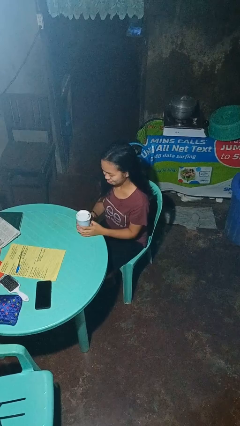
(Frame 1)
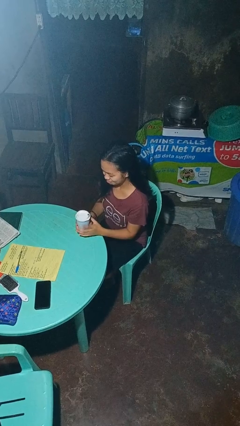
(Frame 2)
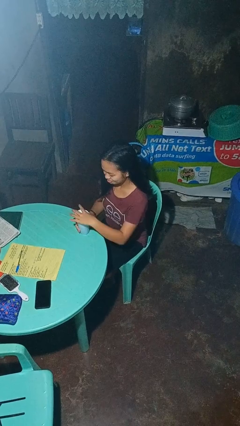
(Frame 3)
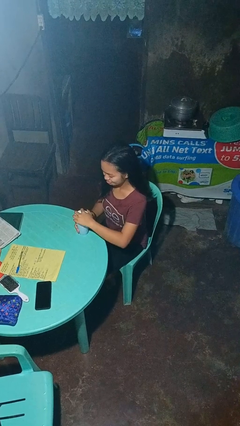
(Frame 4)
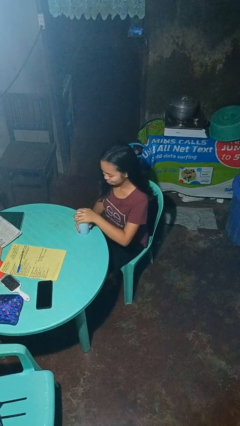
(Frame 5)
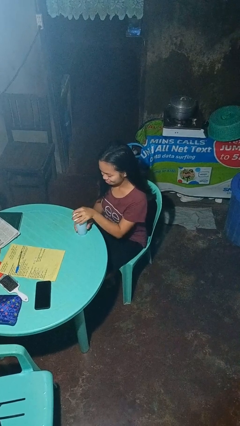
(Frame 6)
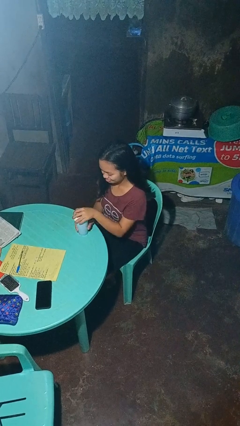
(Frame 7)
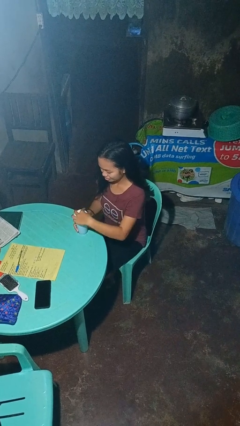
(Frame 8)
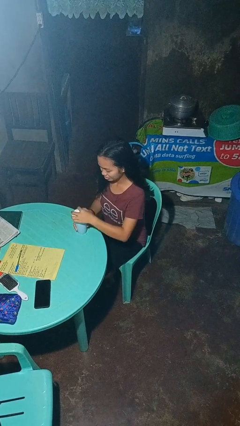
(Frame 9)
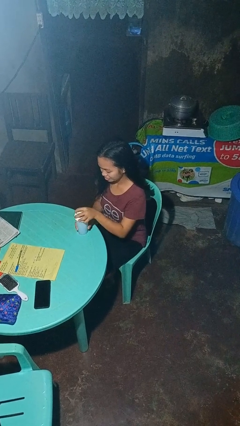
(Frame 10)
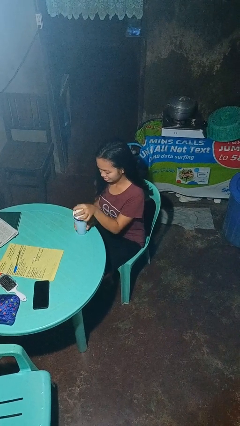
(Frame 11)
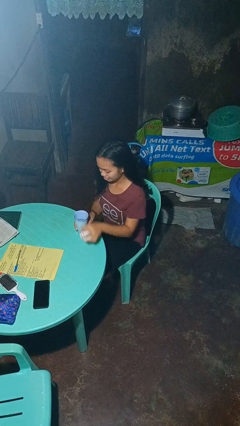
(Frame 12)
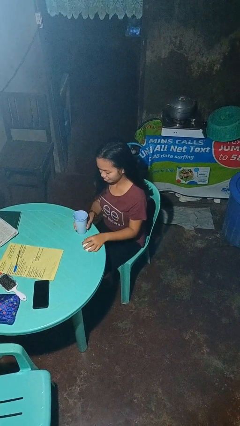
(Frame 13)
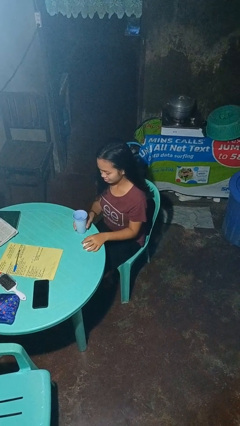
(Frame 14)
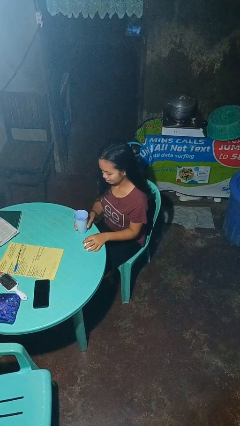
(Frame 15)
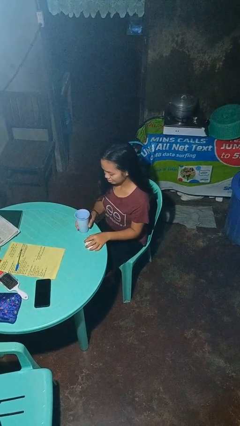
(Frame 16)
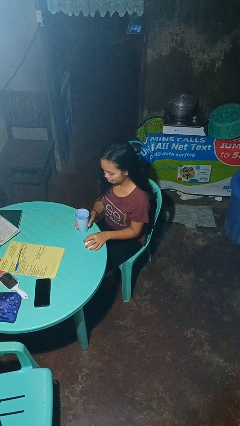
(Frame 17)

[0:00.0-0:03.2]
person unscrews lid from bottle

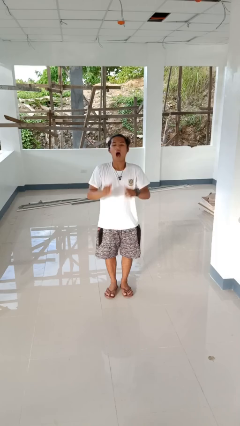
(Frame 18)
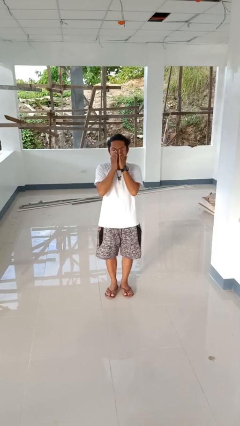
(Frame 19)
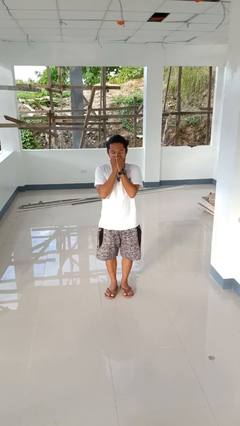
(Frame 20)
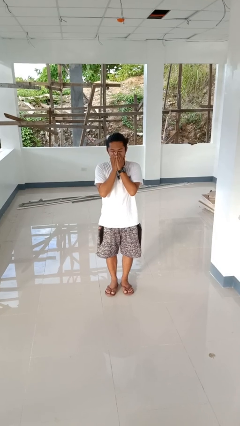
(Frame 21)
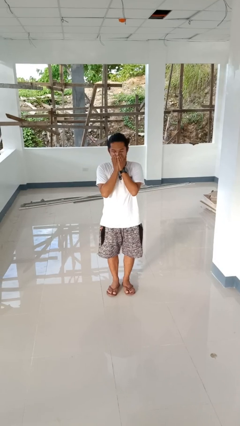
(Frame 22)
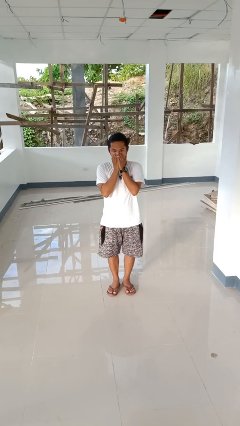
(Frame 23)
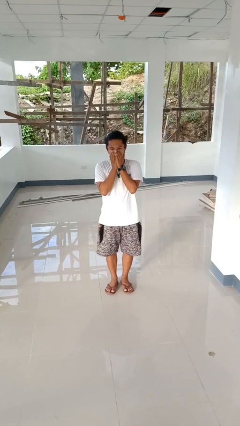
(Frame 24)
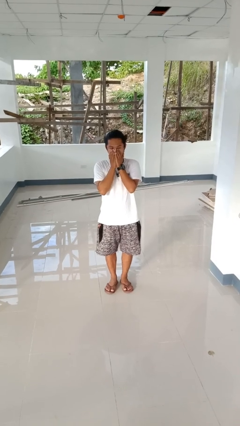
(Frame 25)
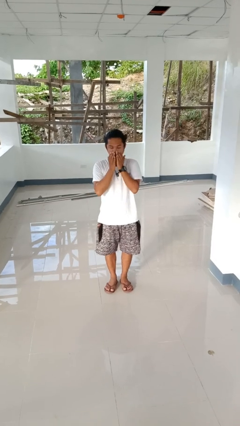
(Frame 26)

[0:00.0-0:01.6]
person sneezes into hand

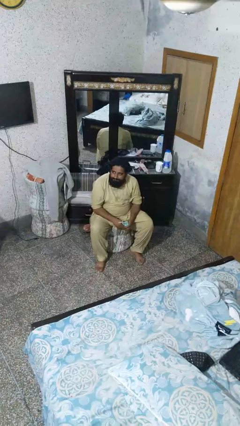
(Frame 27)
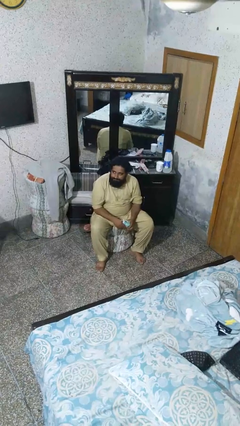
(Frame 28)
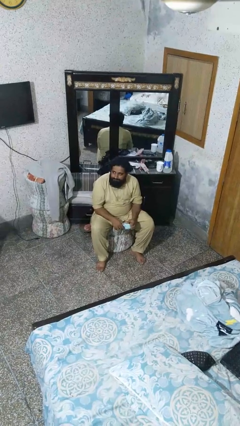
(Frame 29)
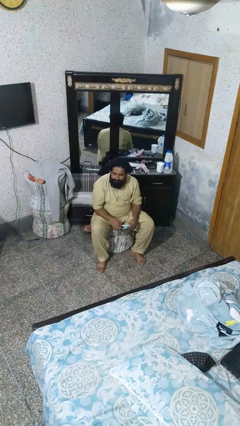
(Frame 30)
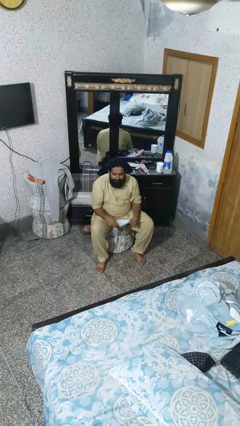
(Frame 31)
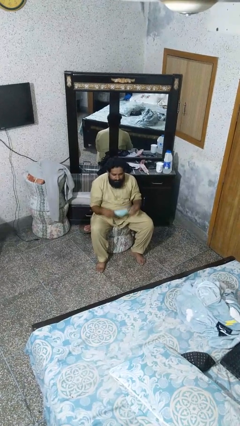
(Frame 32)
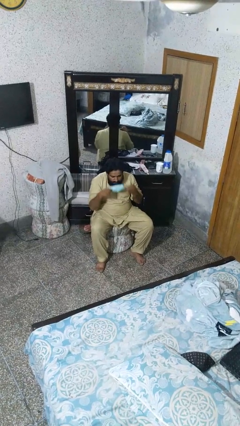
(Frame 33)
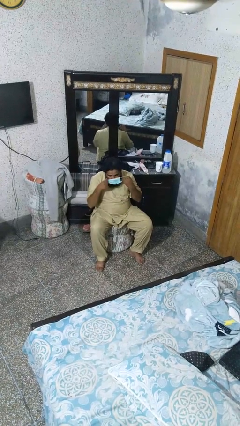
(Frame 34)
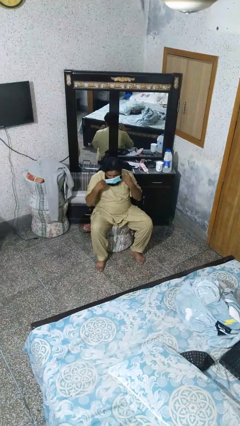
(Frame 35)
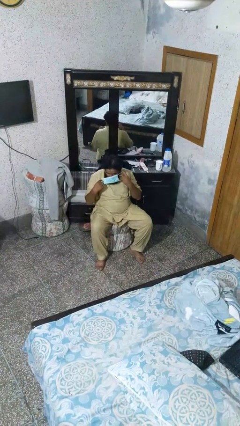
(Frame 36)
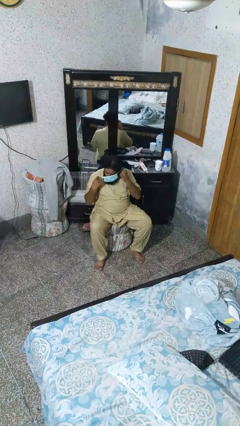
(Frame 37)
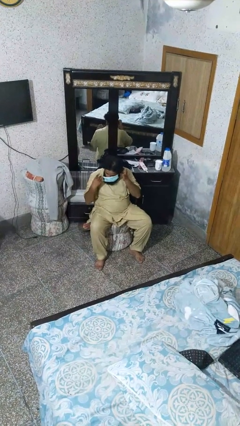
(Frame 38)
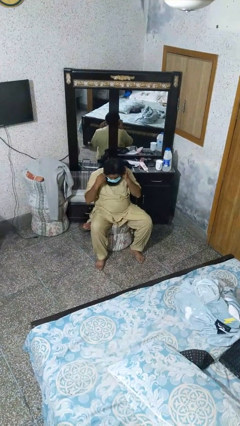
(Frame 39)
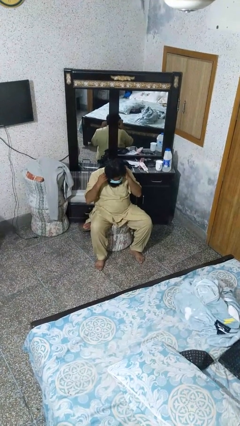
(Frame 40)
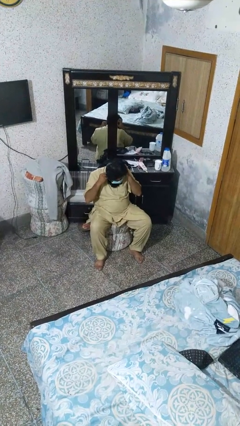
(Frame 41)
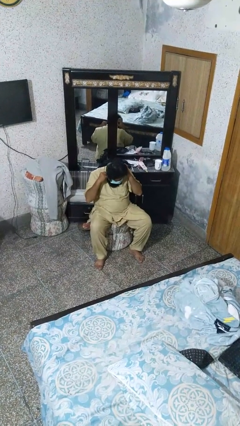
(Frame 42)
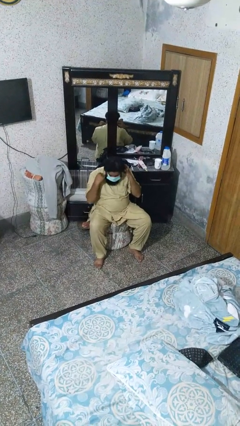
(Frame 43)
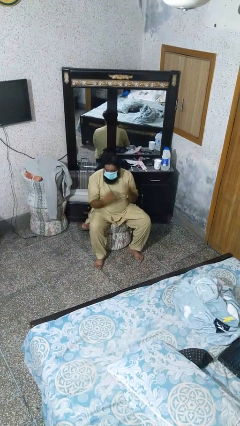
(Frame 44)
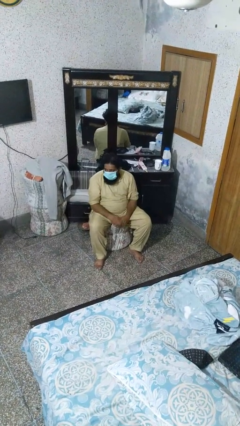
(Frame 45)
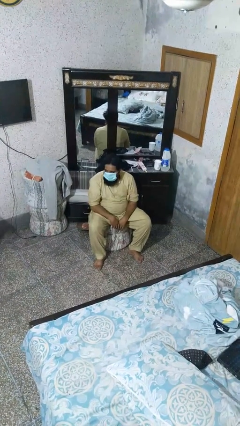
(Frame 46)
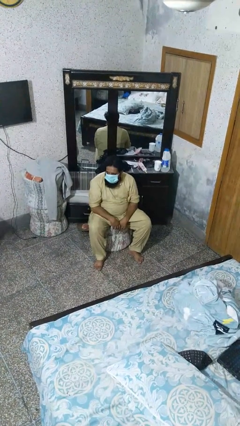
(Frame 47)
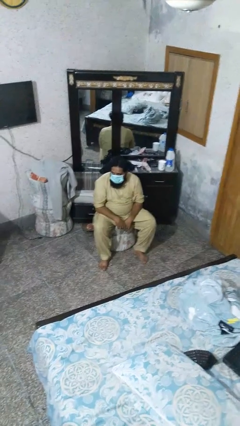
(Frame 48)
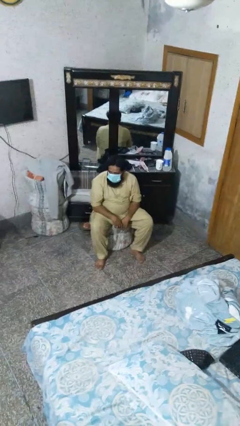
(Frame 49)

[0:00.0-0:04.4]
person puts on facemask

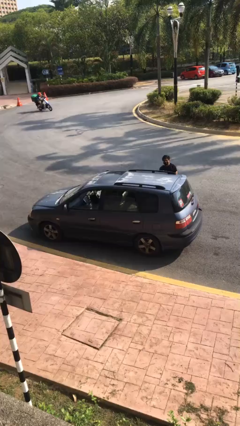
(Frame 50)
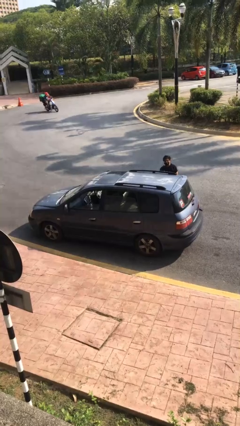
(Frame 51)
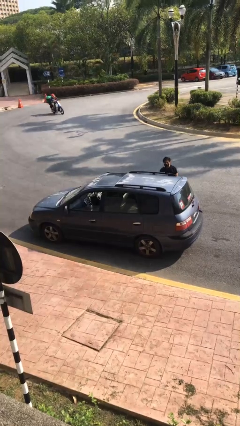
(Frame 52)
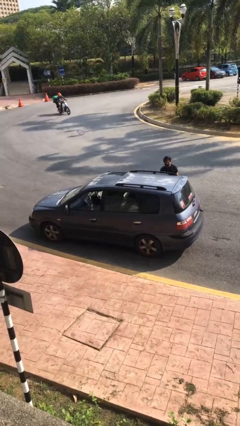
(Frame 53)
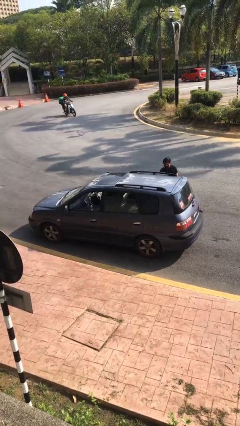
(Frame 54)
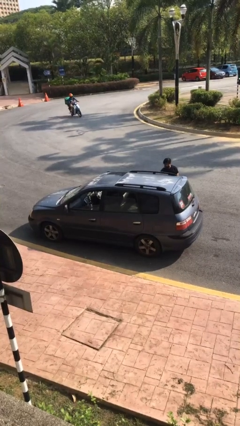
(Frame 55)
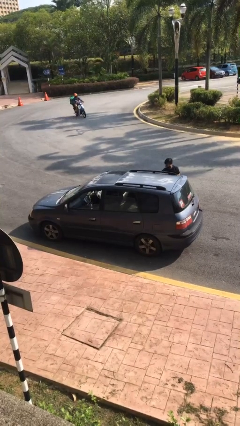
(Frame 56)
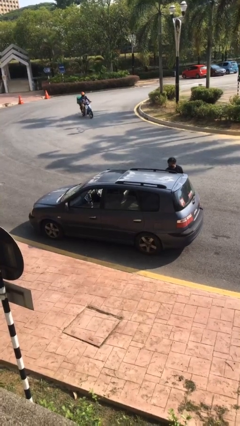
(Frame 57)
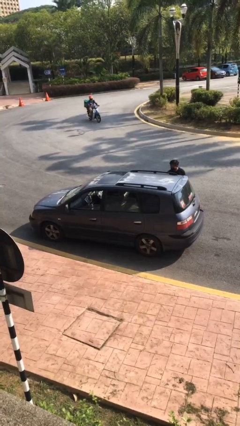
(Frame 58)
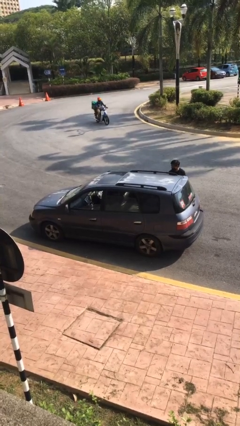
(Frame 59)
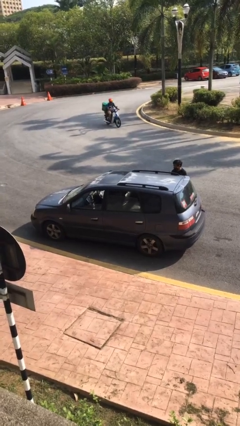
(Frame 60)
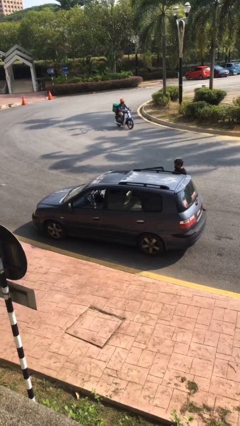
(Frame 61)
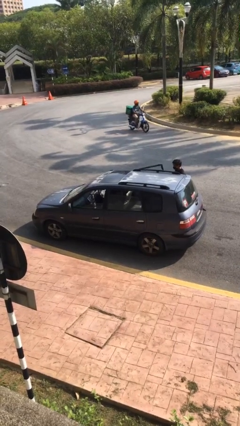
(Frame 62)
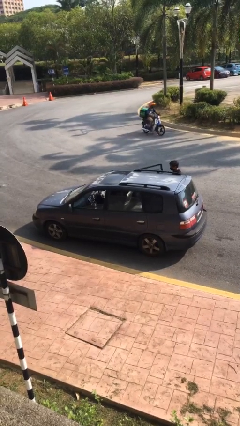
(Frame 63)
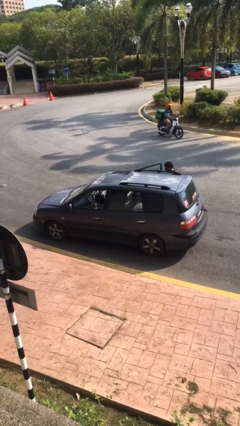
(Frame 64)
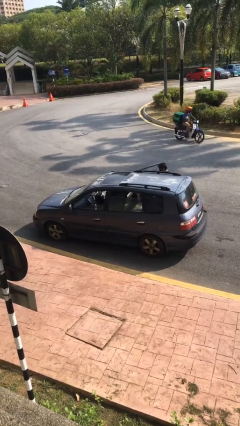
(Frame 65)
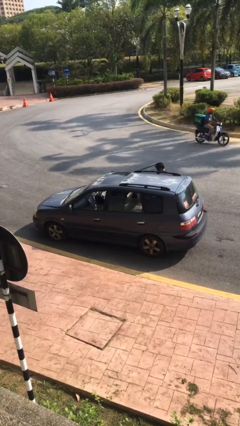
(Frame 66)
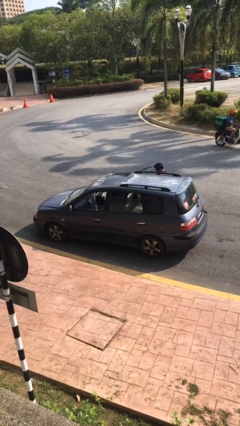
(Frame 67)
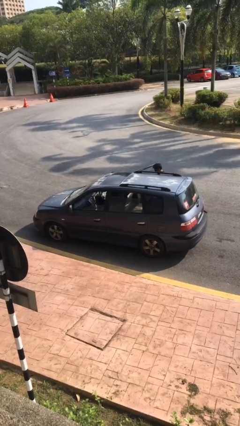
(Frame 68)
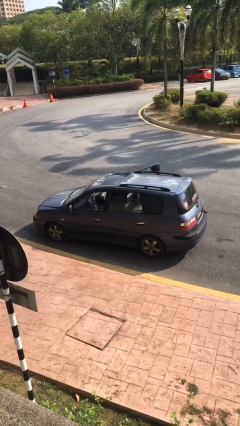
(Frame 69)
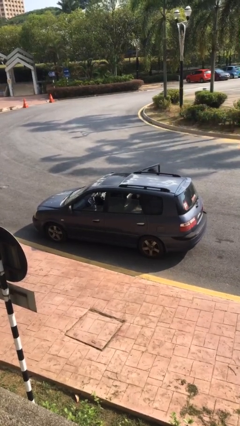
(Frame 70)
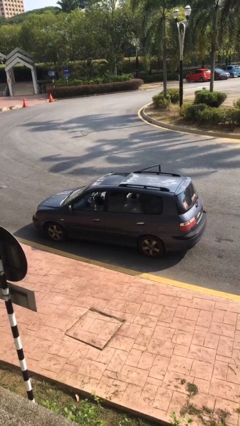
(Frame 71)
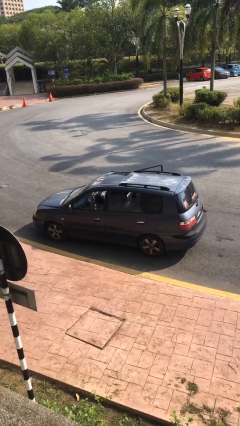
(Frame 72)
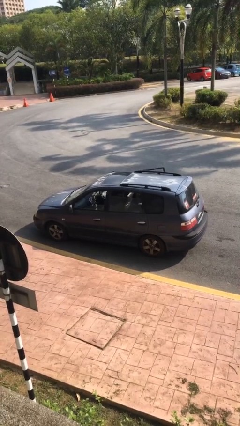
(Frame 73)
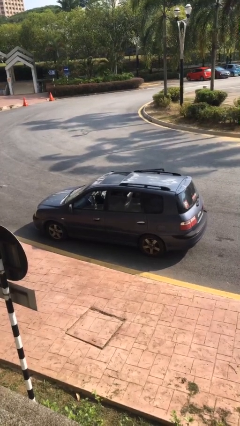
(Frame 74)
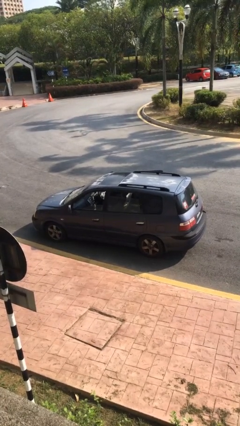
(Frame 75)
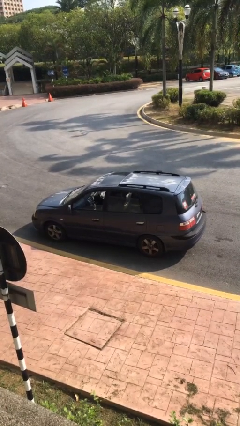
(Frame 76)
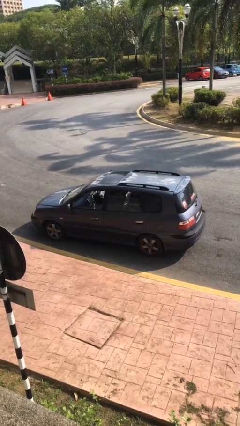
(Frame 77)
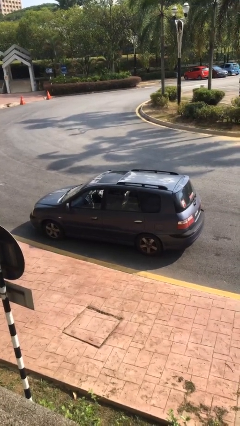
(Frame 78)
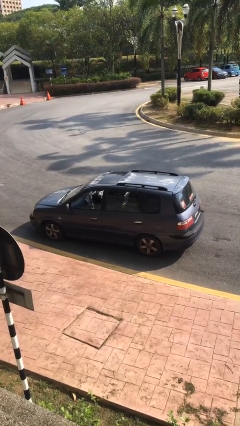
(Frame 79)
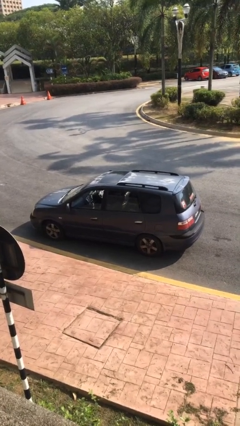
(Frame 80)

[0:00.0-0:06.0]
car picks up person

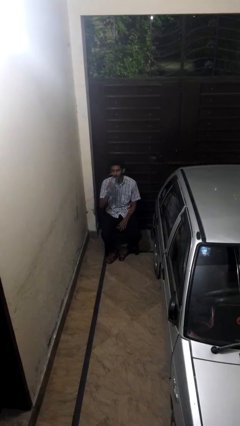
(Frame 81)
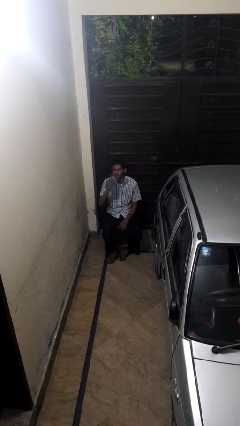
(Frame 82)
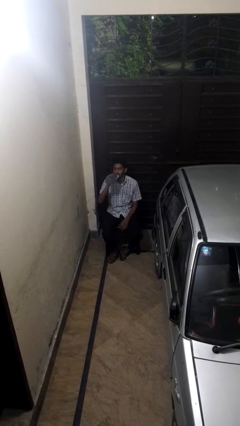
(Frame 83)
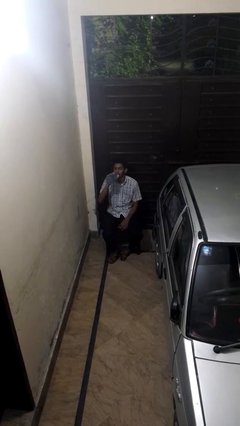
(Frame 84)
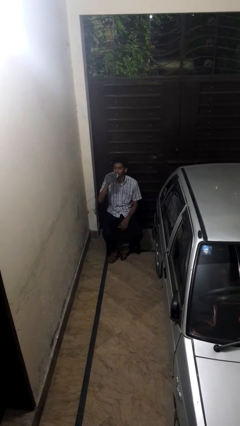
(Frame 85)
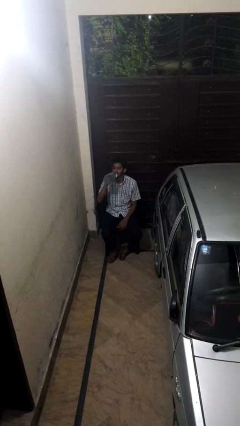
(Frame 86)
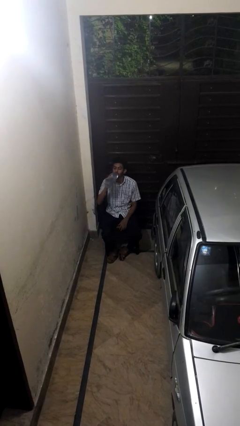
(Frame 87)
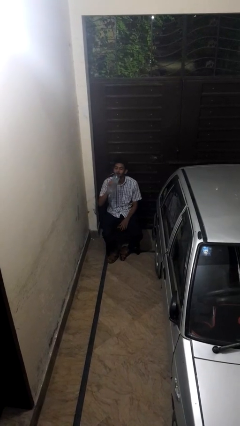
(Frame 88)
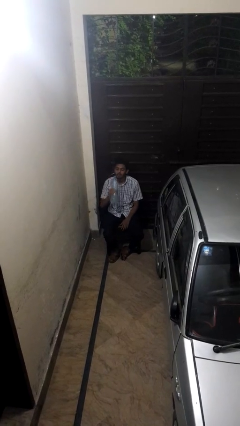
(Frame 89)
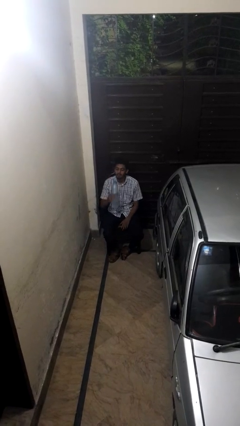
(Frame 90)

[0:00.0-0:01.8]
person drinks from bottle

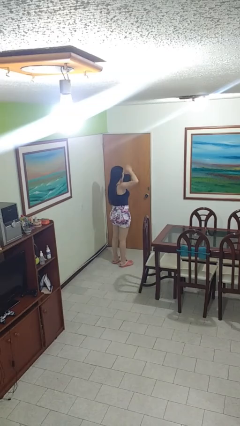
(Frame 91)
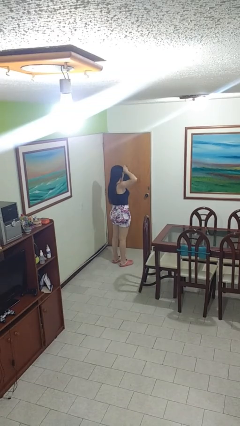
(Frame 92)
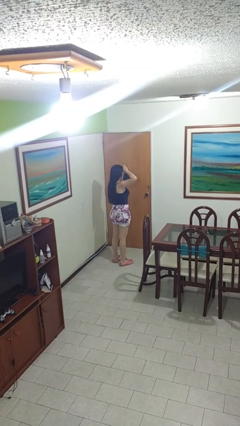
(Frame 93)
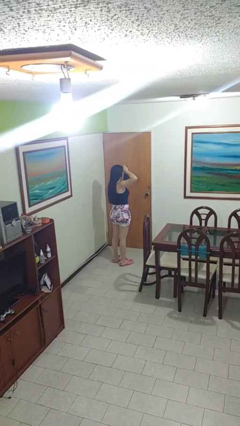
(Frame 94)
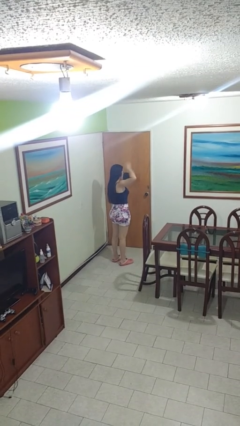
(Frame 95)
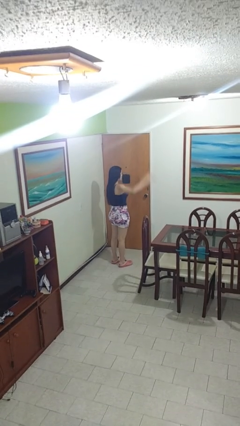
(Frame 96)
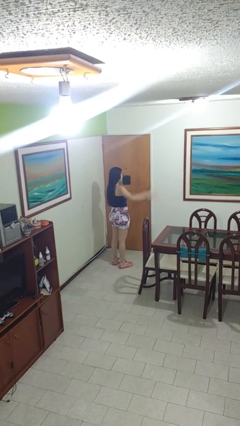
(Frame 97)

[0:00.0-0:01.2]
person salutes
